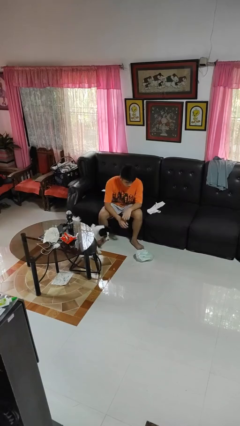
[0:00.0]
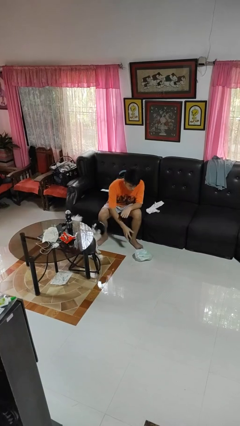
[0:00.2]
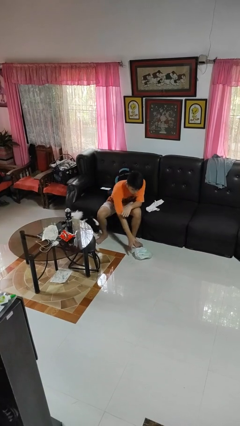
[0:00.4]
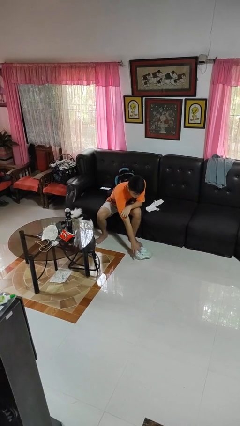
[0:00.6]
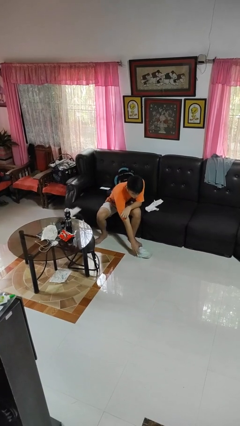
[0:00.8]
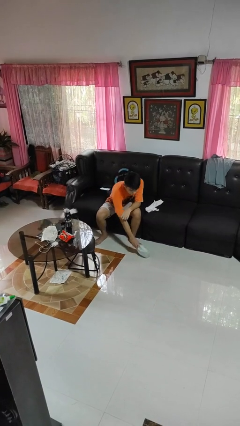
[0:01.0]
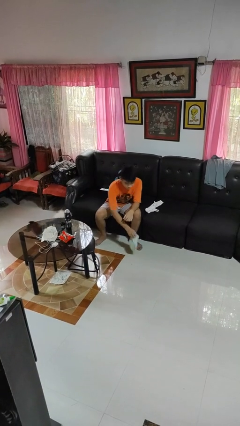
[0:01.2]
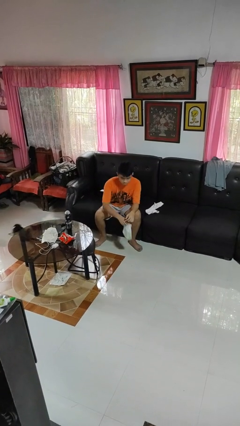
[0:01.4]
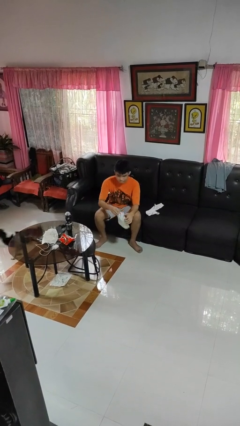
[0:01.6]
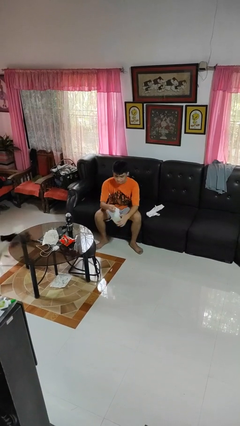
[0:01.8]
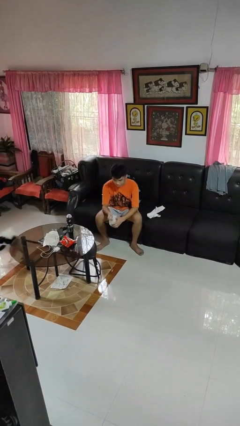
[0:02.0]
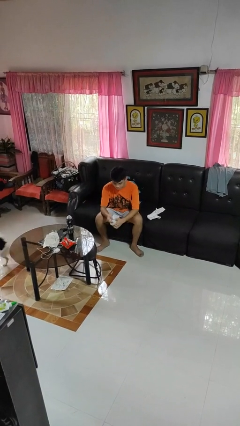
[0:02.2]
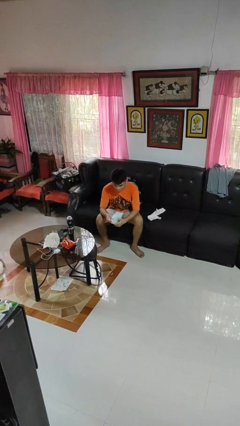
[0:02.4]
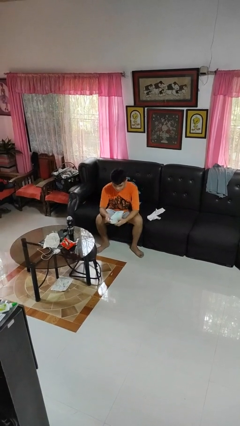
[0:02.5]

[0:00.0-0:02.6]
person picks up object from floor

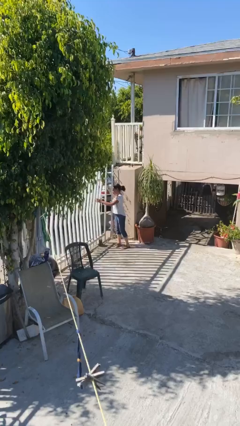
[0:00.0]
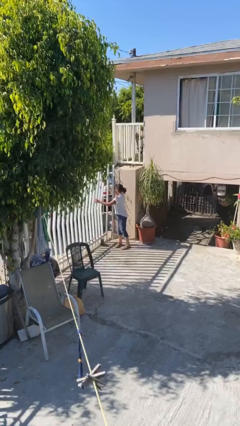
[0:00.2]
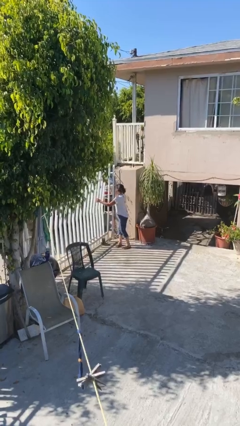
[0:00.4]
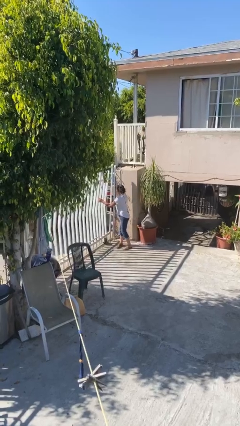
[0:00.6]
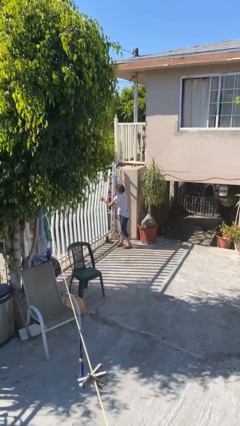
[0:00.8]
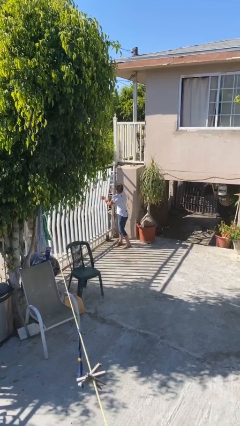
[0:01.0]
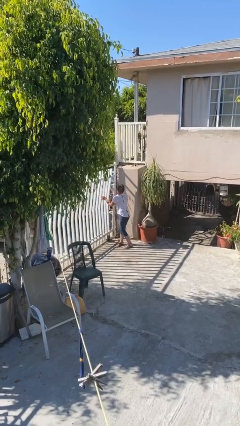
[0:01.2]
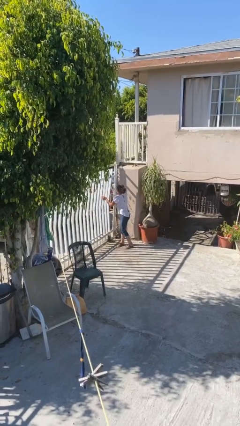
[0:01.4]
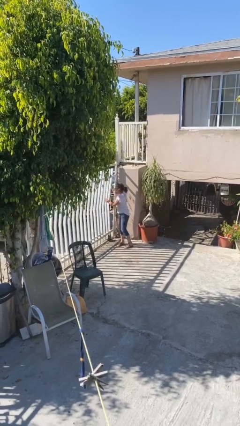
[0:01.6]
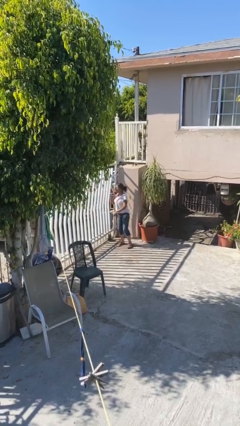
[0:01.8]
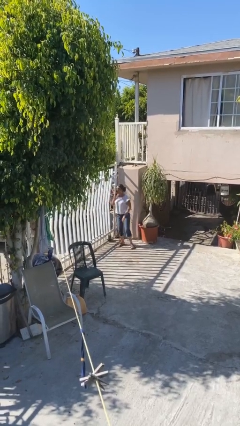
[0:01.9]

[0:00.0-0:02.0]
person closes facility door

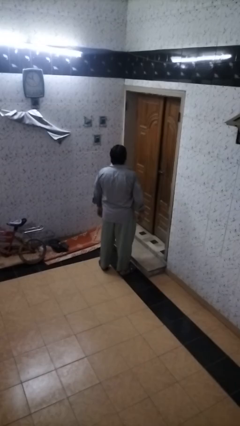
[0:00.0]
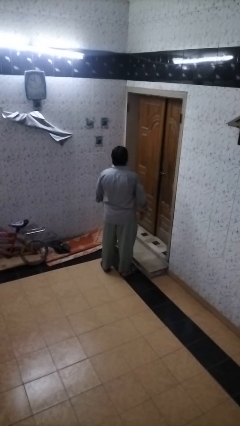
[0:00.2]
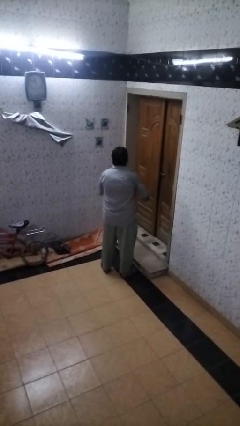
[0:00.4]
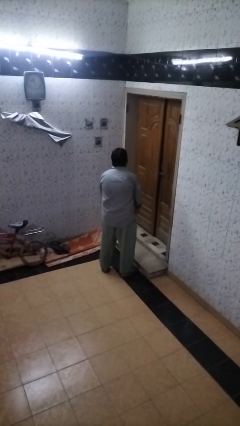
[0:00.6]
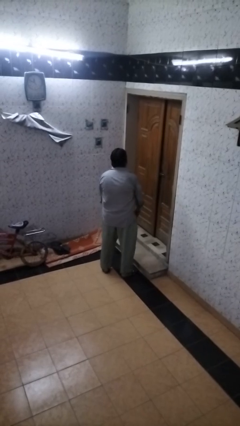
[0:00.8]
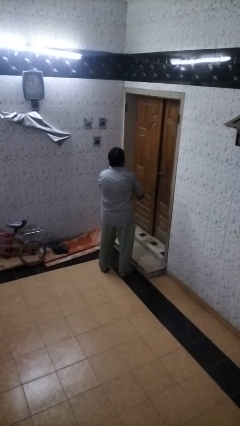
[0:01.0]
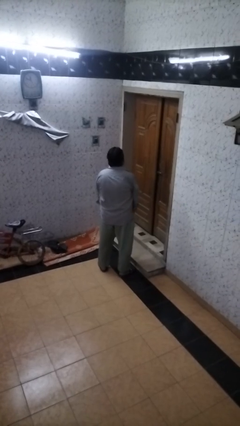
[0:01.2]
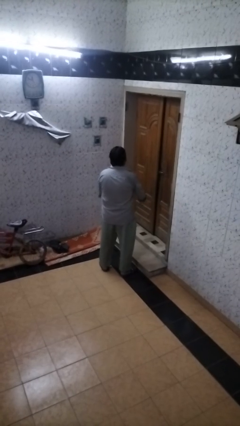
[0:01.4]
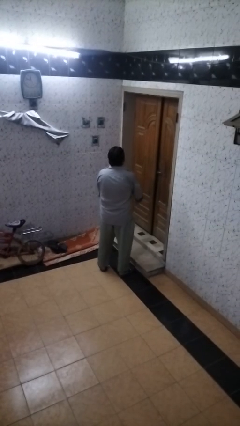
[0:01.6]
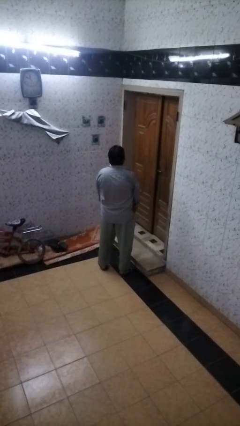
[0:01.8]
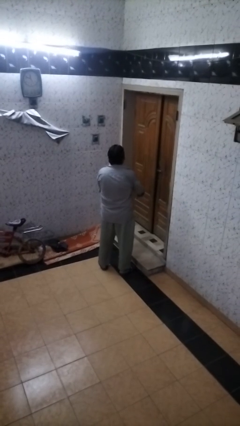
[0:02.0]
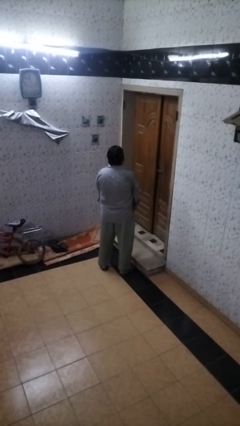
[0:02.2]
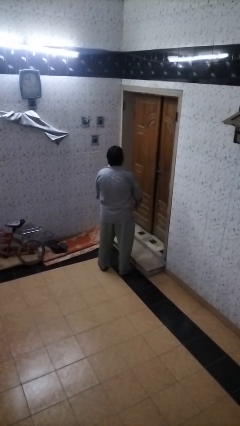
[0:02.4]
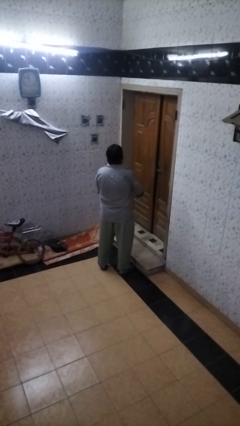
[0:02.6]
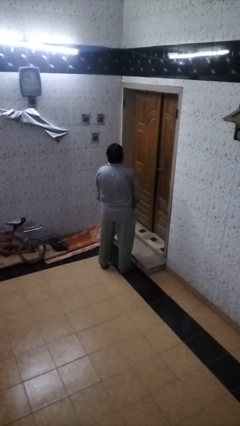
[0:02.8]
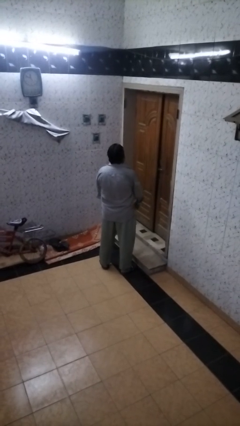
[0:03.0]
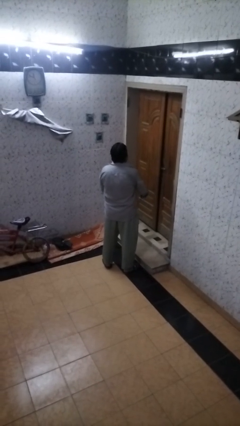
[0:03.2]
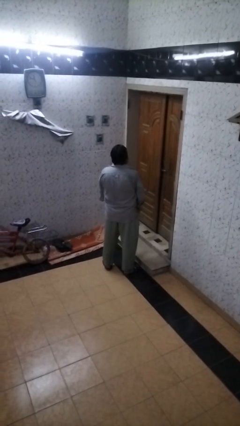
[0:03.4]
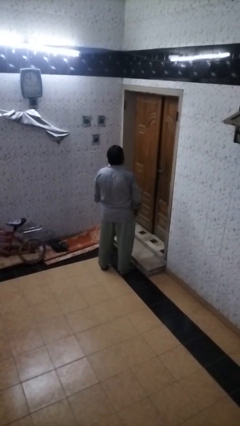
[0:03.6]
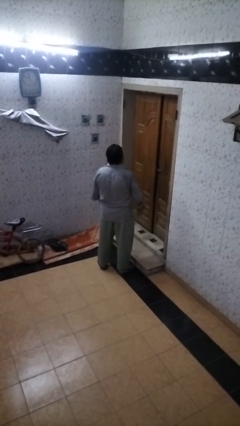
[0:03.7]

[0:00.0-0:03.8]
person slaps hands on thighs

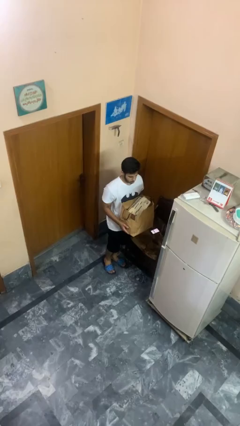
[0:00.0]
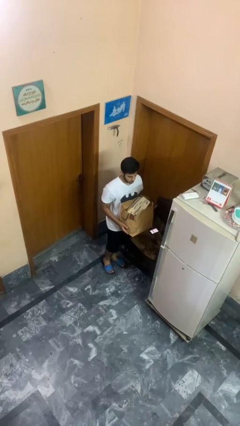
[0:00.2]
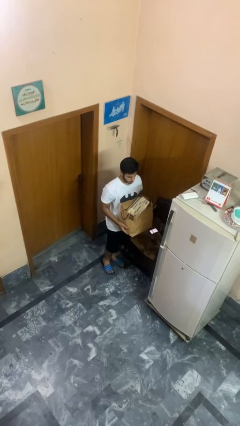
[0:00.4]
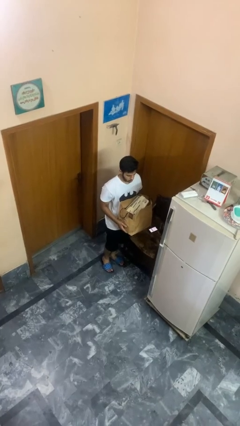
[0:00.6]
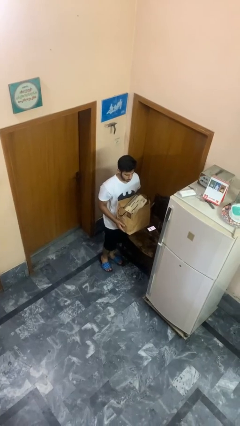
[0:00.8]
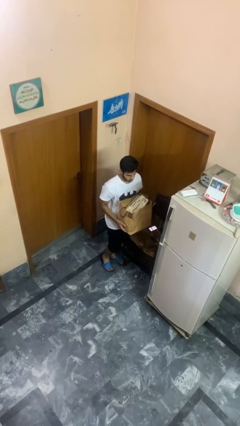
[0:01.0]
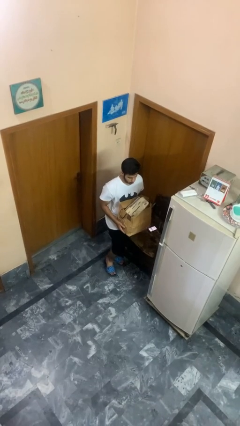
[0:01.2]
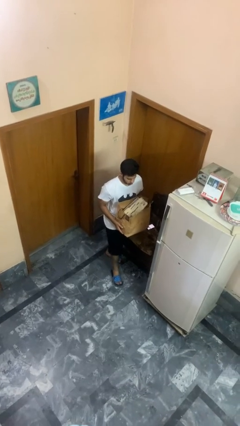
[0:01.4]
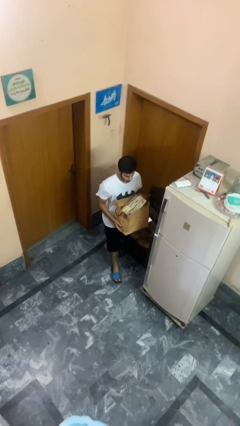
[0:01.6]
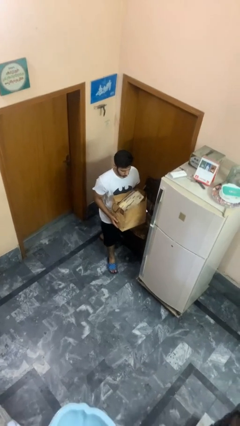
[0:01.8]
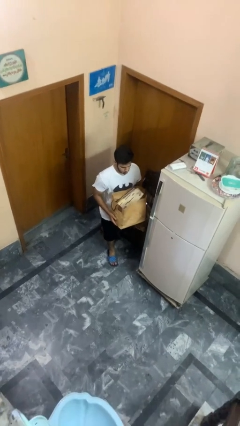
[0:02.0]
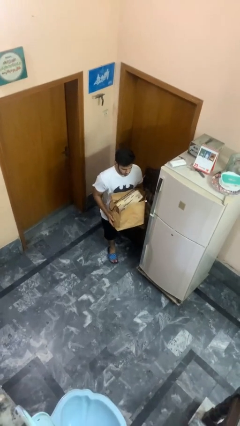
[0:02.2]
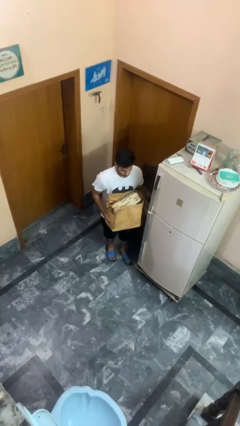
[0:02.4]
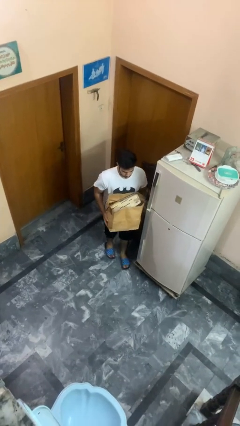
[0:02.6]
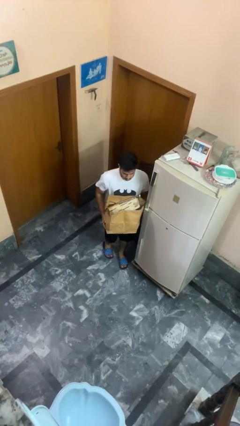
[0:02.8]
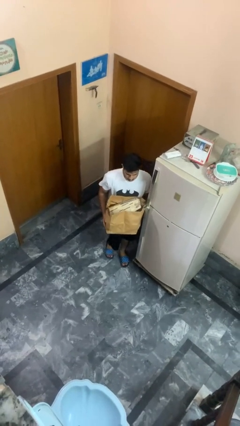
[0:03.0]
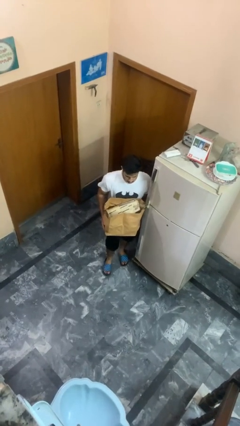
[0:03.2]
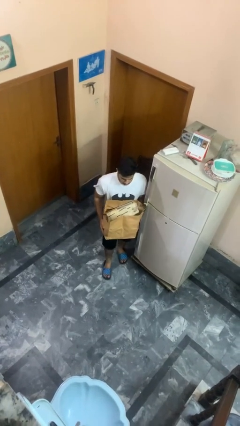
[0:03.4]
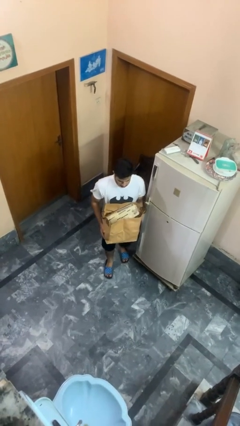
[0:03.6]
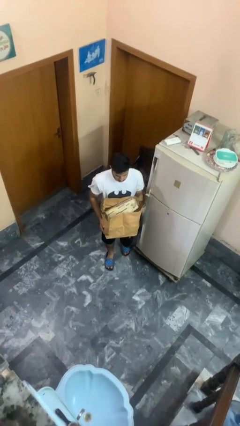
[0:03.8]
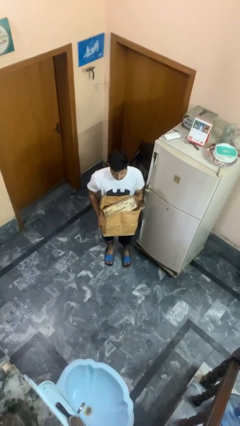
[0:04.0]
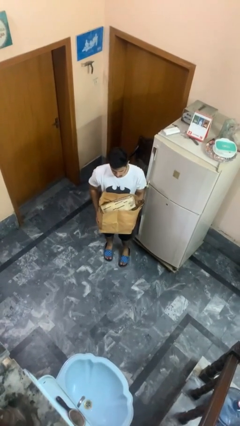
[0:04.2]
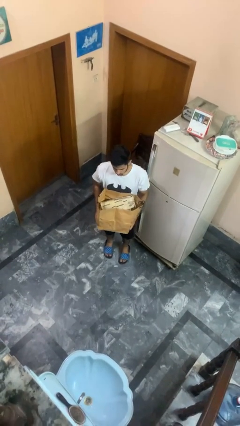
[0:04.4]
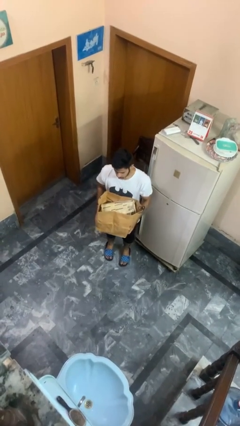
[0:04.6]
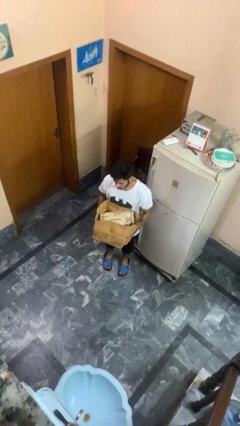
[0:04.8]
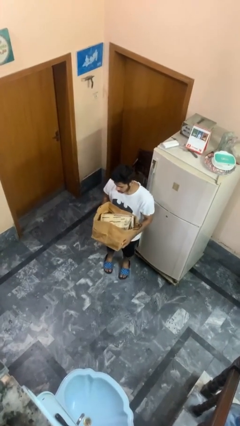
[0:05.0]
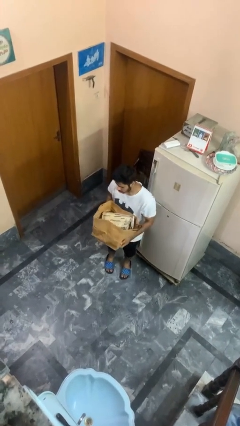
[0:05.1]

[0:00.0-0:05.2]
person carries groceries

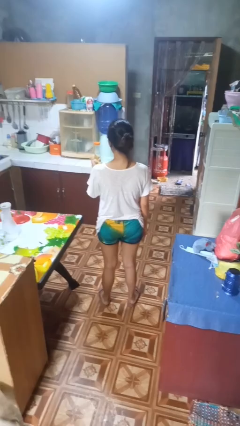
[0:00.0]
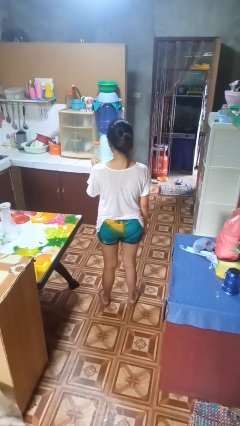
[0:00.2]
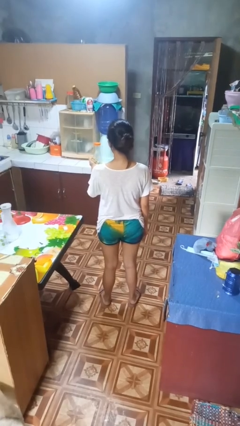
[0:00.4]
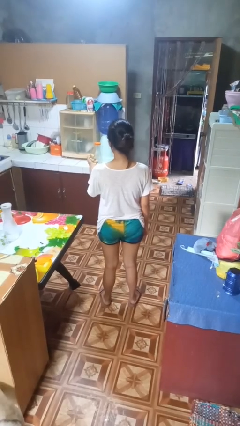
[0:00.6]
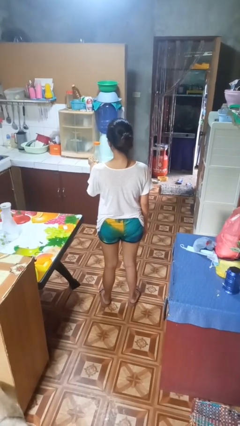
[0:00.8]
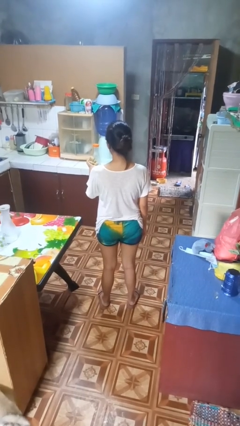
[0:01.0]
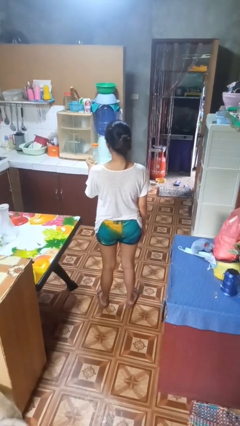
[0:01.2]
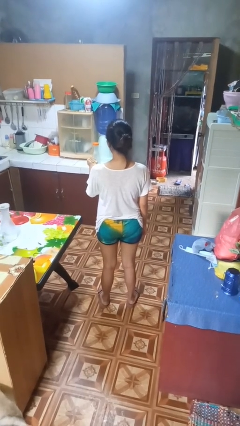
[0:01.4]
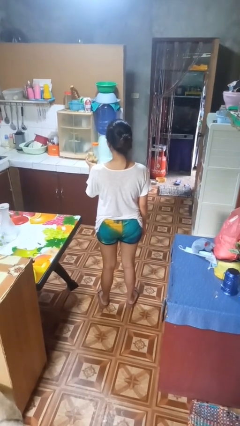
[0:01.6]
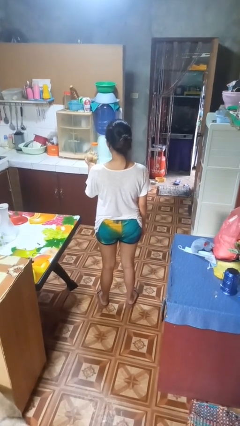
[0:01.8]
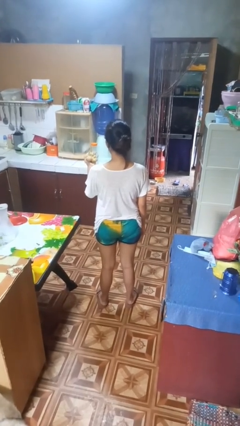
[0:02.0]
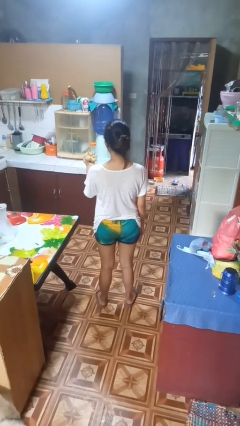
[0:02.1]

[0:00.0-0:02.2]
person squeezes object

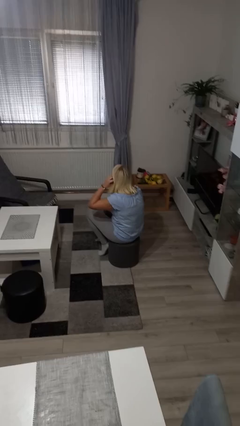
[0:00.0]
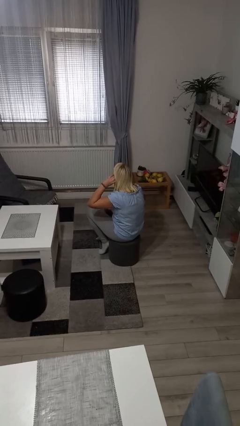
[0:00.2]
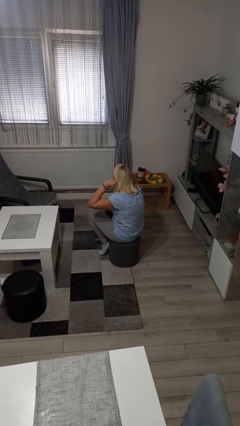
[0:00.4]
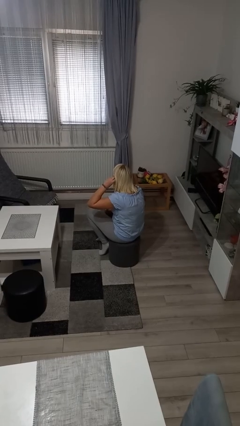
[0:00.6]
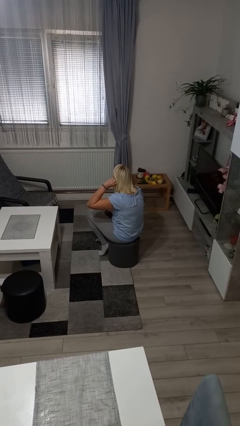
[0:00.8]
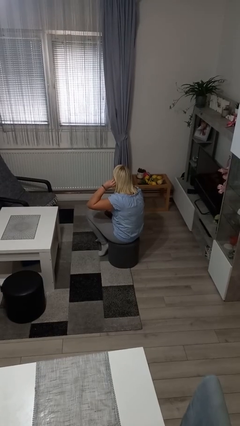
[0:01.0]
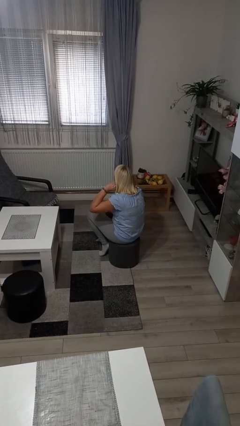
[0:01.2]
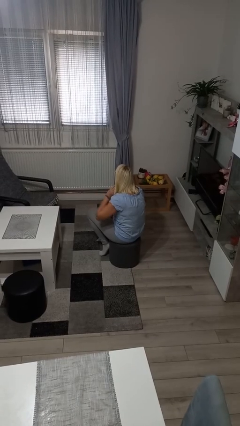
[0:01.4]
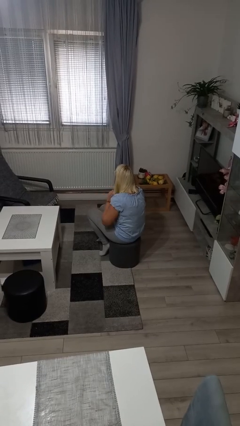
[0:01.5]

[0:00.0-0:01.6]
person touches earlobe
